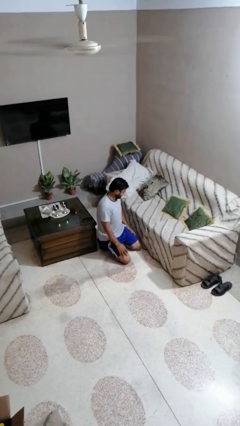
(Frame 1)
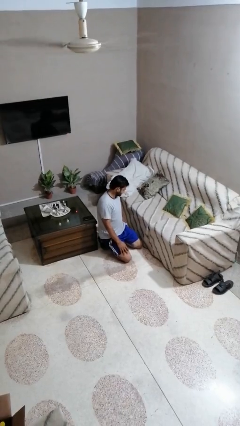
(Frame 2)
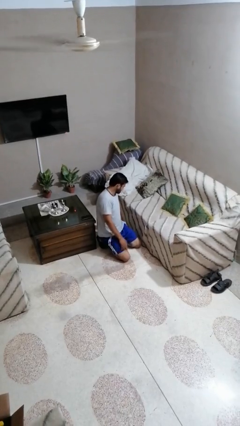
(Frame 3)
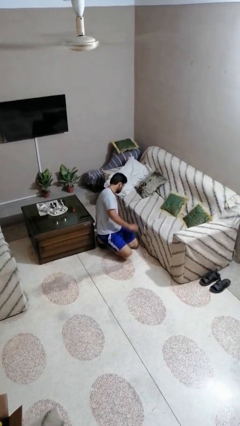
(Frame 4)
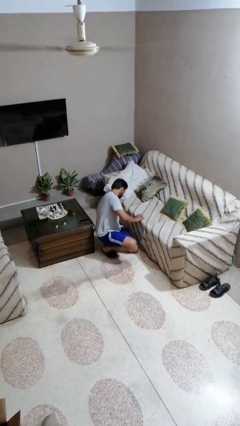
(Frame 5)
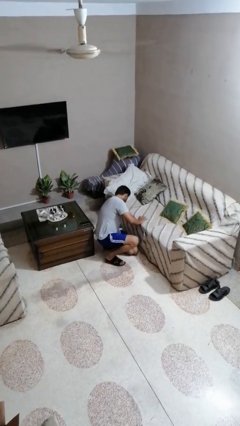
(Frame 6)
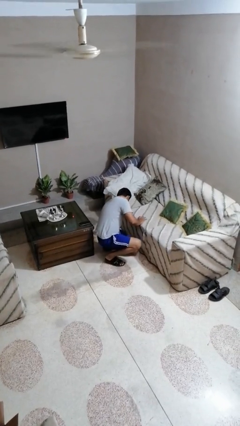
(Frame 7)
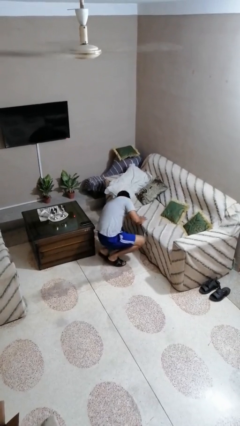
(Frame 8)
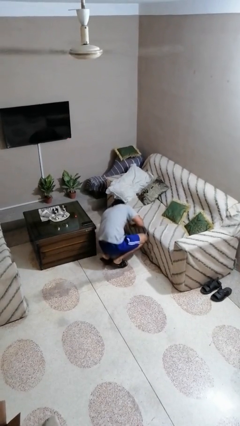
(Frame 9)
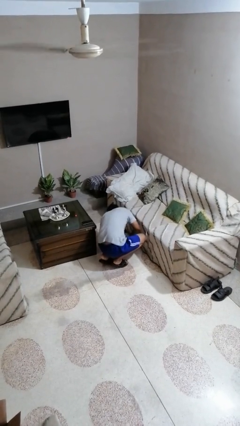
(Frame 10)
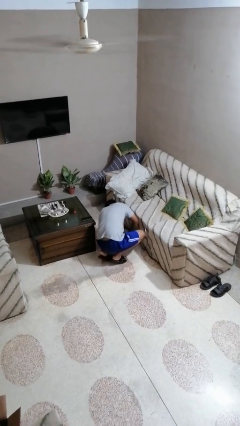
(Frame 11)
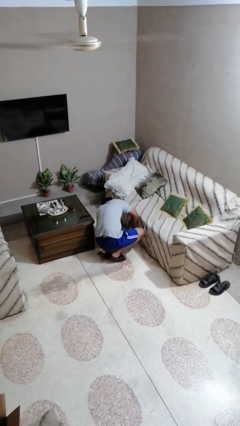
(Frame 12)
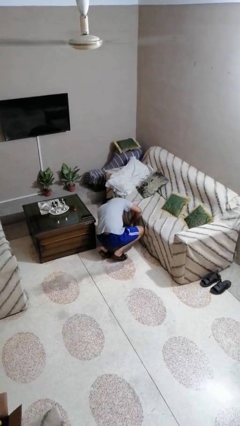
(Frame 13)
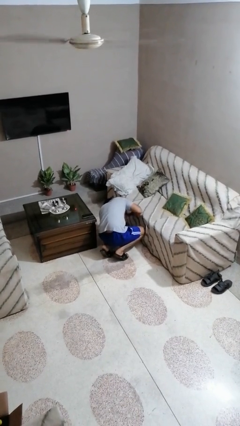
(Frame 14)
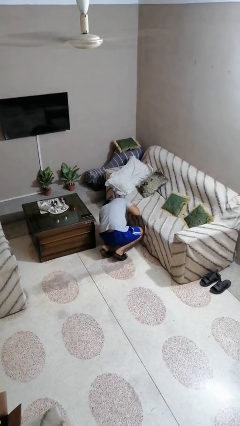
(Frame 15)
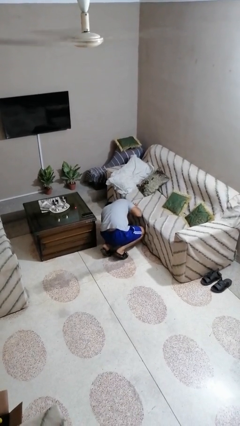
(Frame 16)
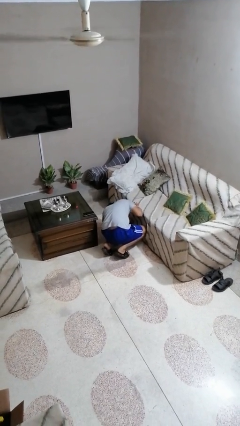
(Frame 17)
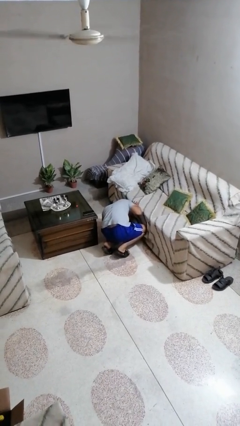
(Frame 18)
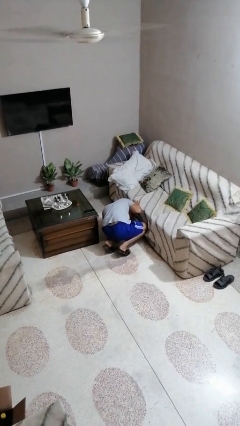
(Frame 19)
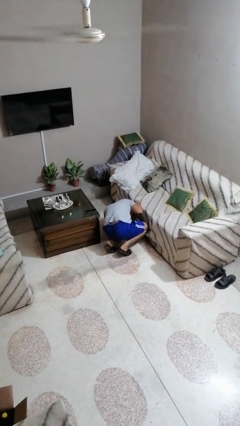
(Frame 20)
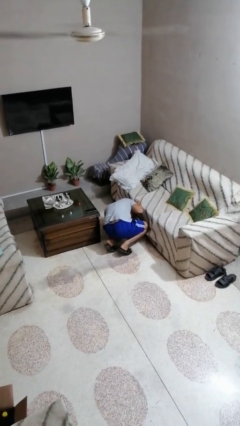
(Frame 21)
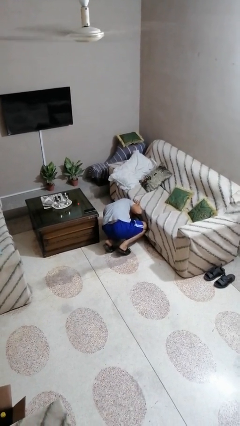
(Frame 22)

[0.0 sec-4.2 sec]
person searches under couch

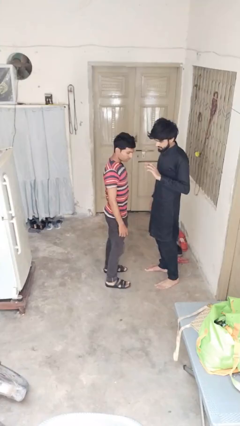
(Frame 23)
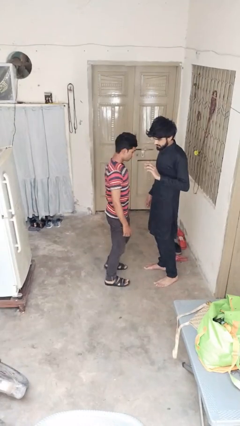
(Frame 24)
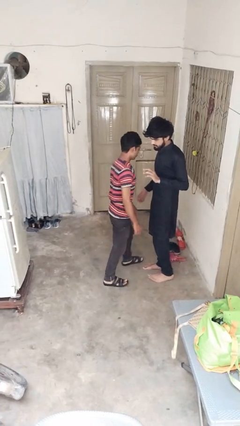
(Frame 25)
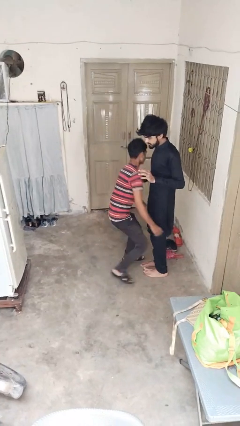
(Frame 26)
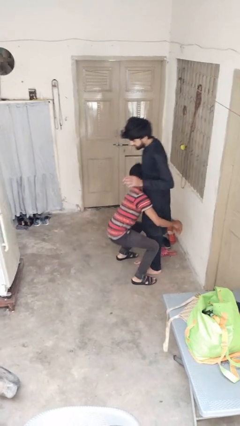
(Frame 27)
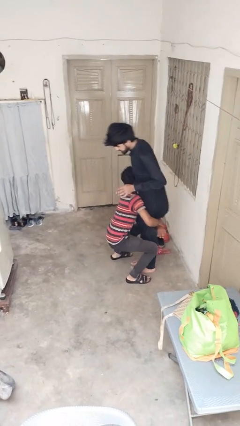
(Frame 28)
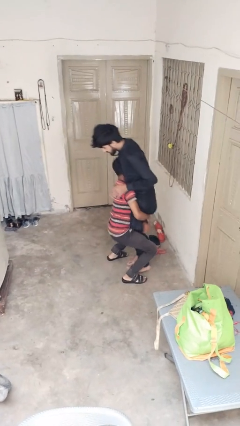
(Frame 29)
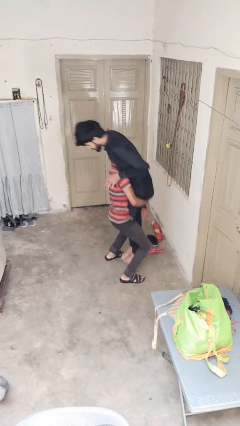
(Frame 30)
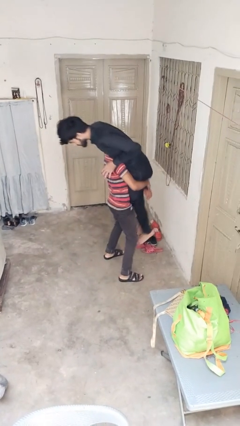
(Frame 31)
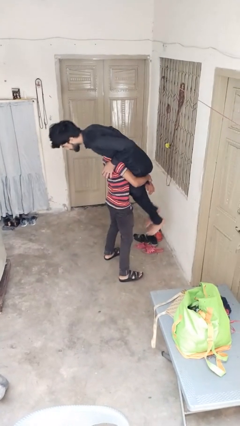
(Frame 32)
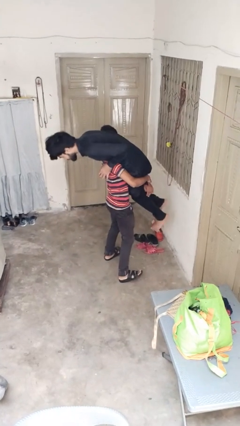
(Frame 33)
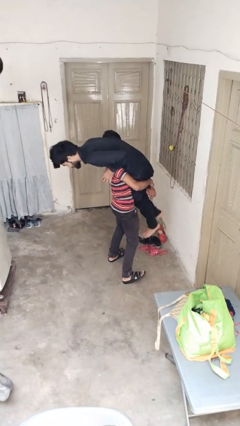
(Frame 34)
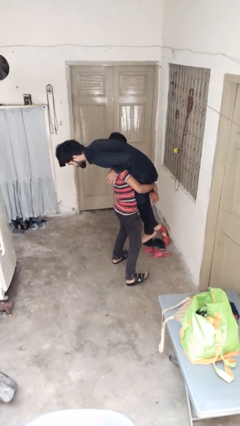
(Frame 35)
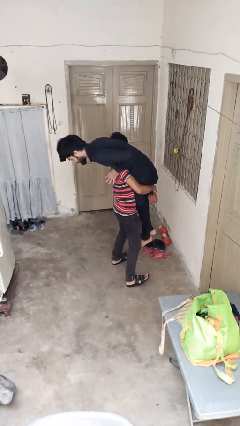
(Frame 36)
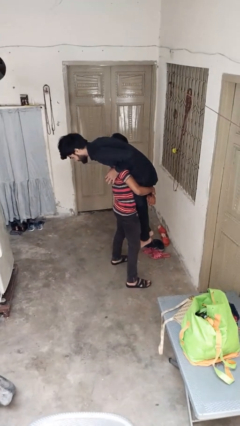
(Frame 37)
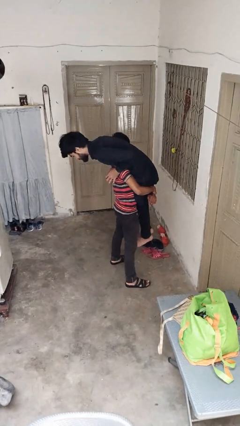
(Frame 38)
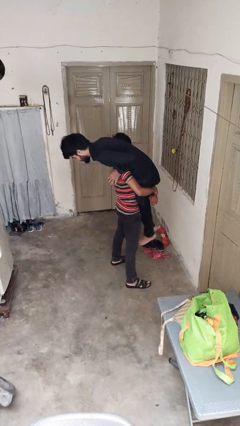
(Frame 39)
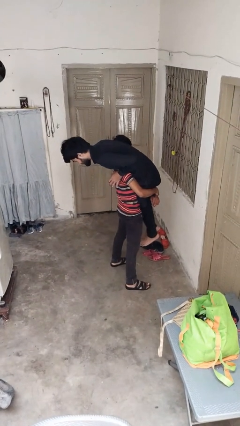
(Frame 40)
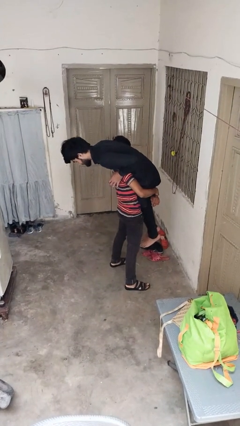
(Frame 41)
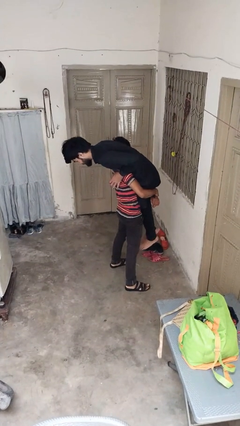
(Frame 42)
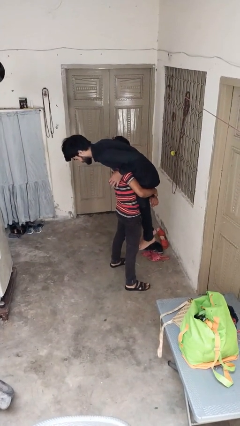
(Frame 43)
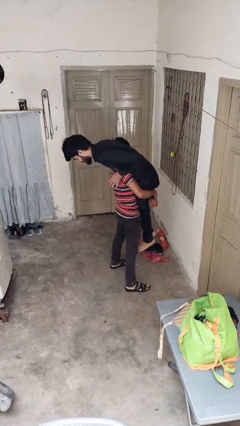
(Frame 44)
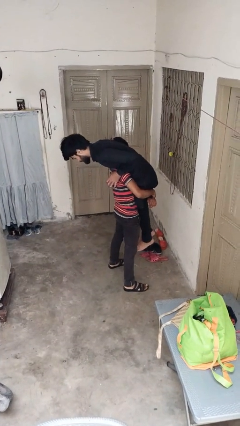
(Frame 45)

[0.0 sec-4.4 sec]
person carries person over shoulder

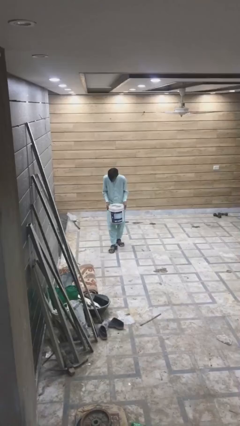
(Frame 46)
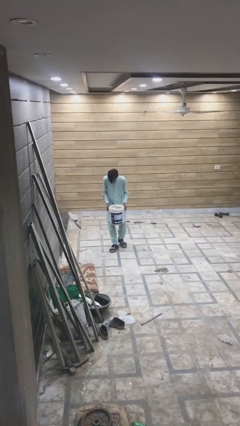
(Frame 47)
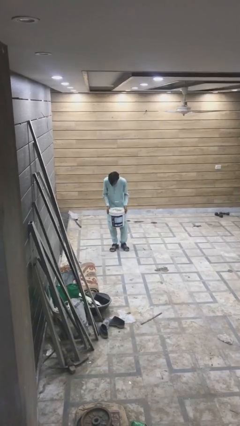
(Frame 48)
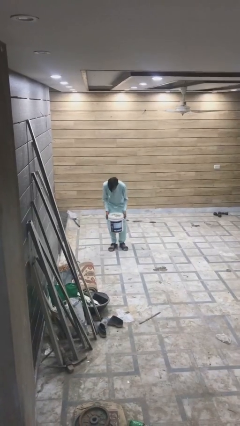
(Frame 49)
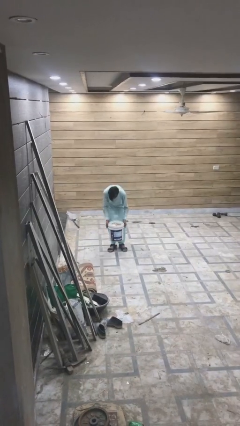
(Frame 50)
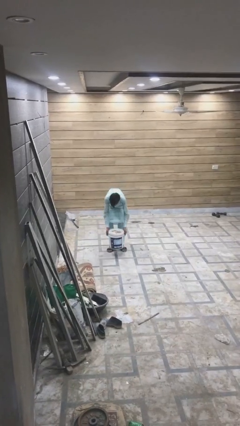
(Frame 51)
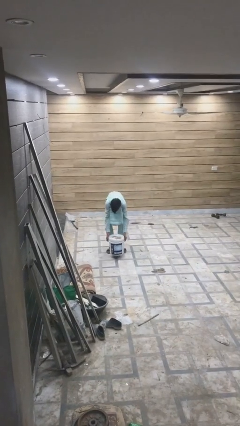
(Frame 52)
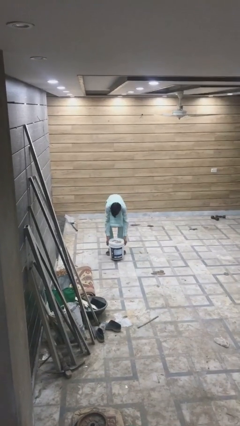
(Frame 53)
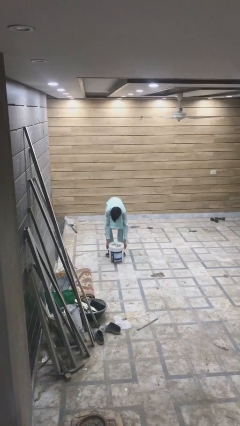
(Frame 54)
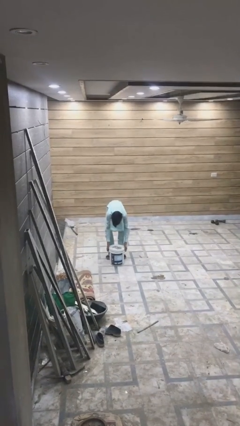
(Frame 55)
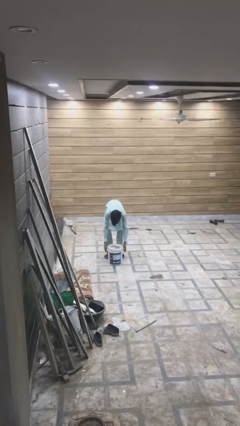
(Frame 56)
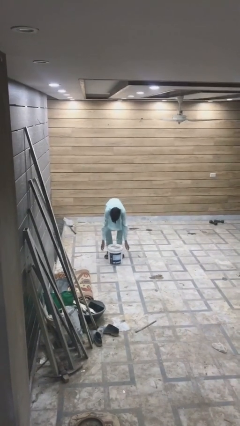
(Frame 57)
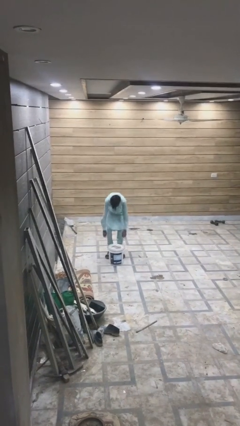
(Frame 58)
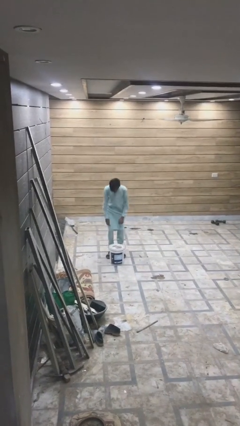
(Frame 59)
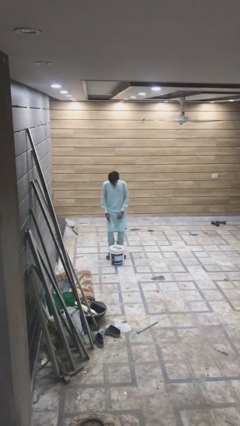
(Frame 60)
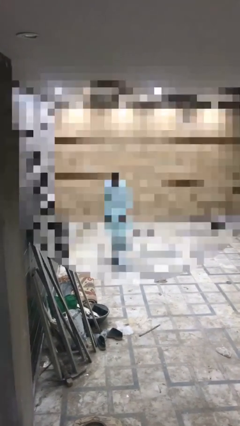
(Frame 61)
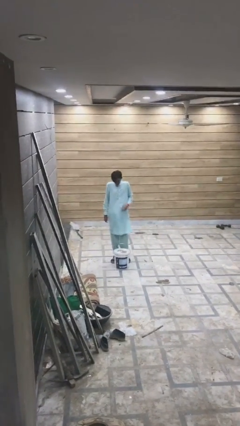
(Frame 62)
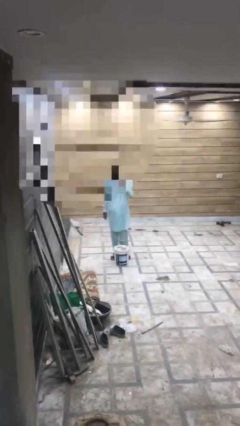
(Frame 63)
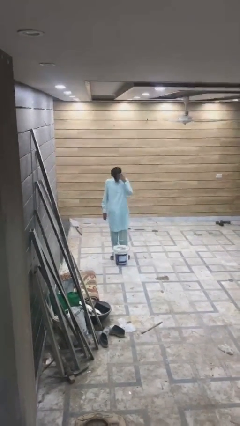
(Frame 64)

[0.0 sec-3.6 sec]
person puts down object on floor

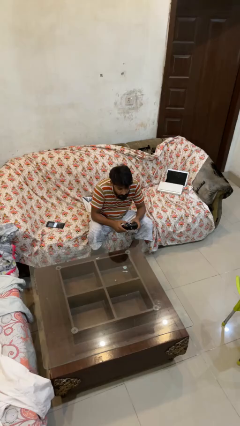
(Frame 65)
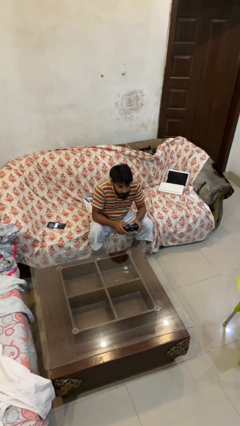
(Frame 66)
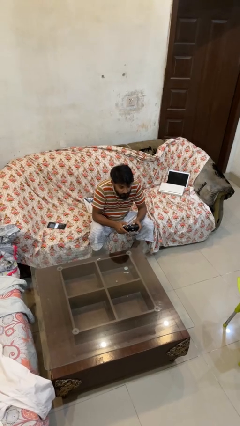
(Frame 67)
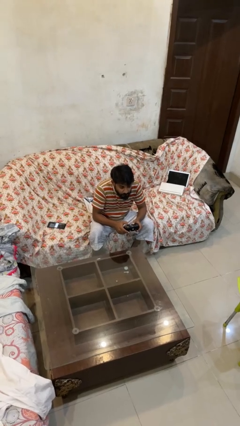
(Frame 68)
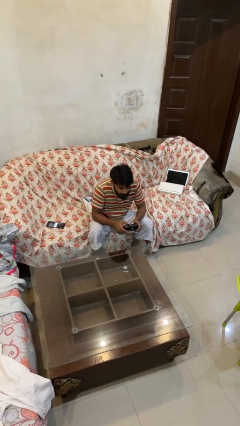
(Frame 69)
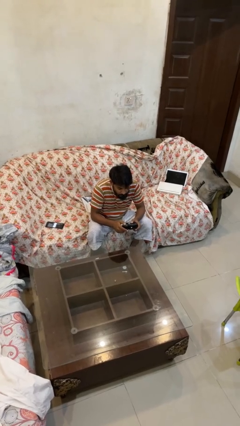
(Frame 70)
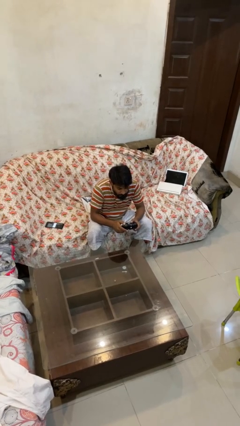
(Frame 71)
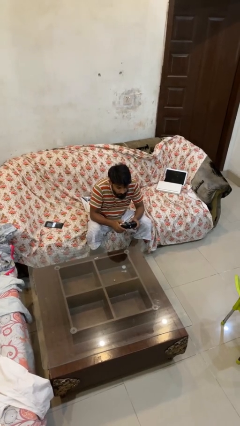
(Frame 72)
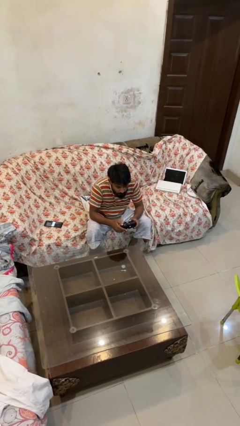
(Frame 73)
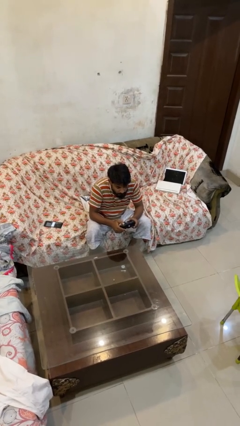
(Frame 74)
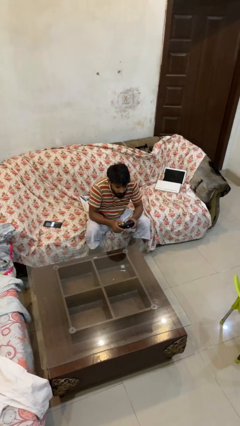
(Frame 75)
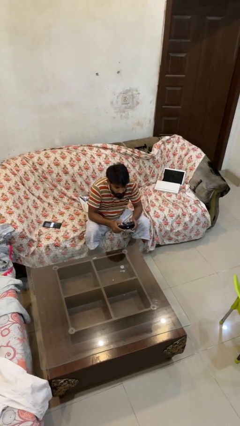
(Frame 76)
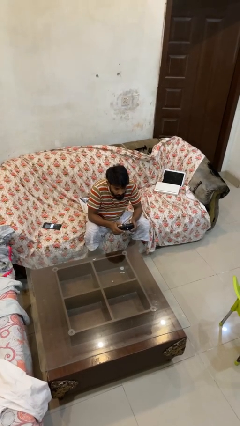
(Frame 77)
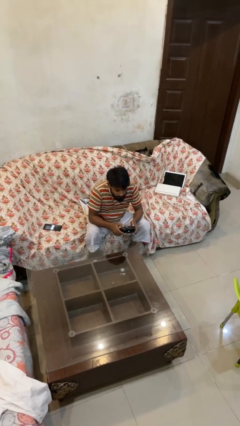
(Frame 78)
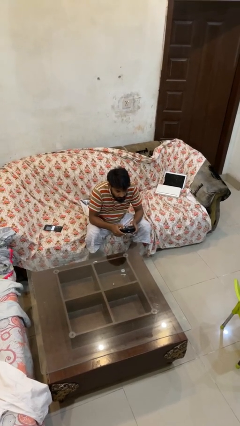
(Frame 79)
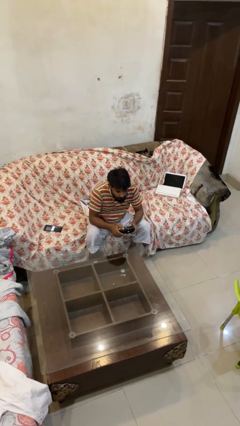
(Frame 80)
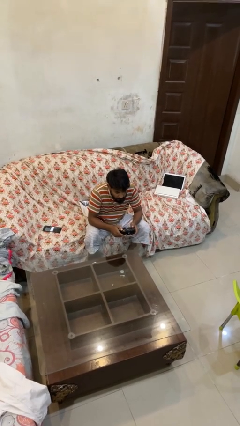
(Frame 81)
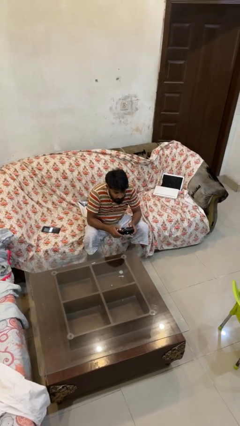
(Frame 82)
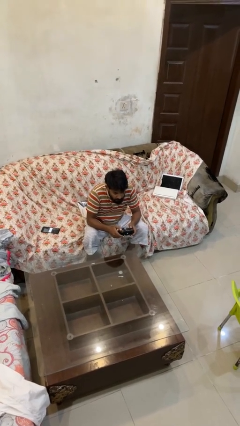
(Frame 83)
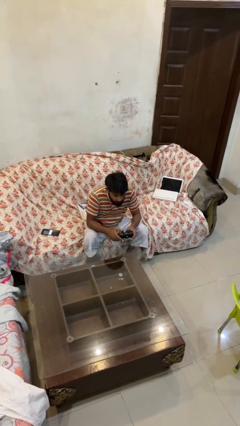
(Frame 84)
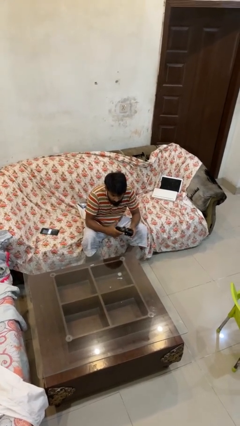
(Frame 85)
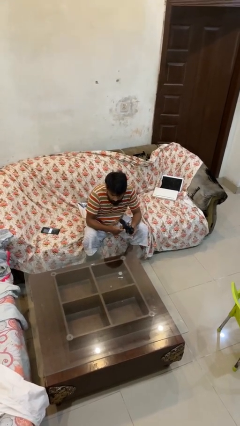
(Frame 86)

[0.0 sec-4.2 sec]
person interacts with handheld game

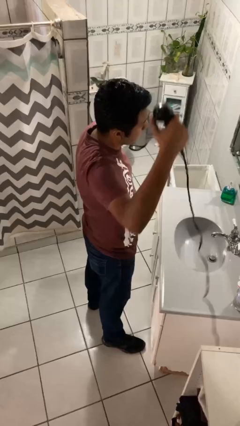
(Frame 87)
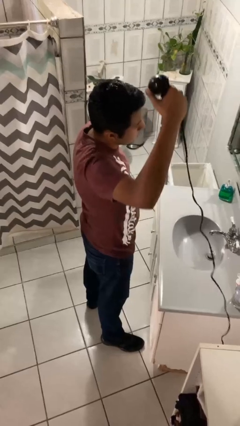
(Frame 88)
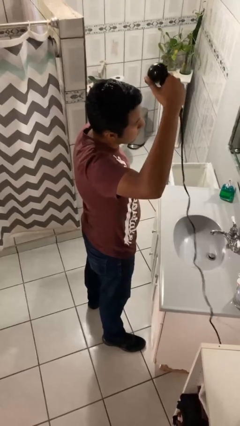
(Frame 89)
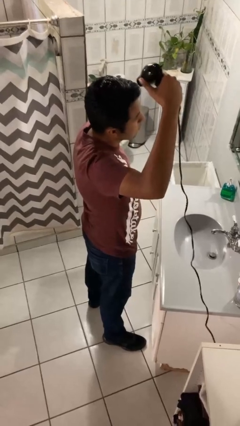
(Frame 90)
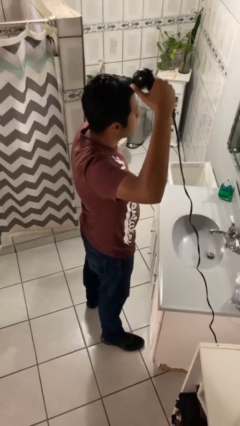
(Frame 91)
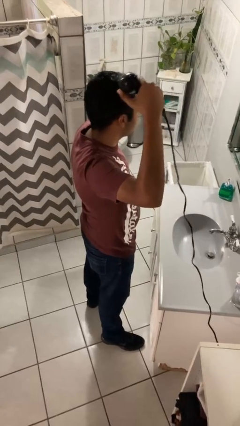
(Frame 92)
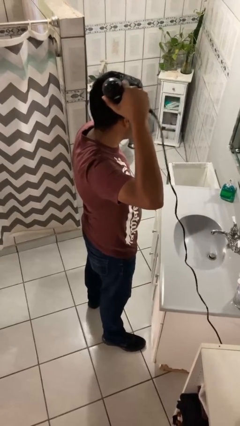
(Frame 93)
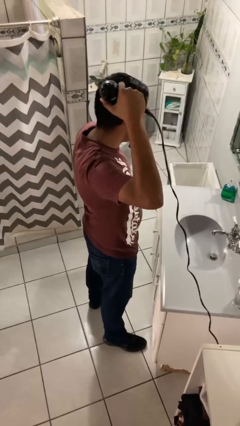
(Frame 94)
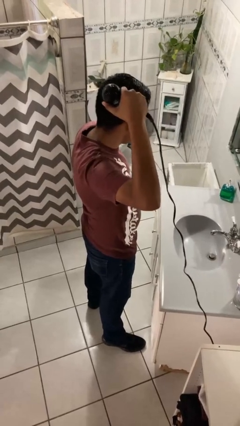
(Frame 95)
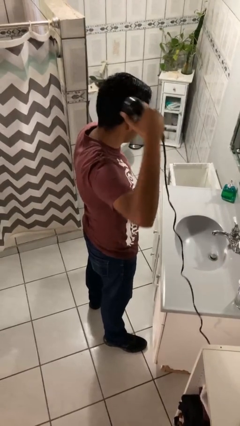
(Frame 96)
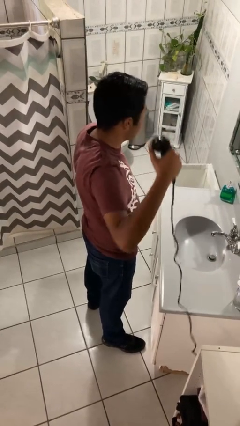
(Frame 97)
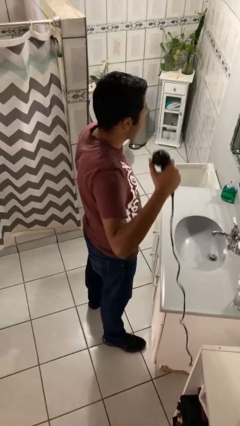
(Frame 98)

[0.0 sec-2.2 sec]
person dries hair with hairdryer
